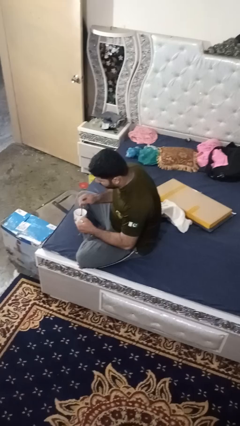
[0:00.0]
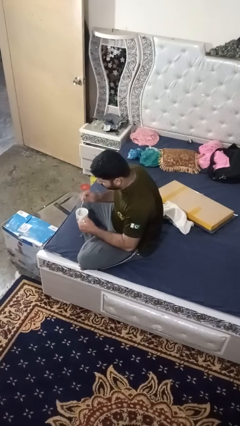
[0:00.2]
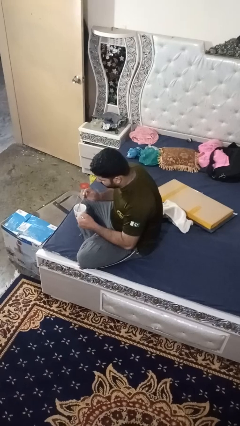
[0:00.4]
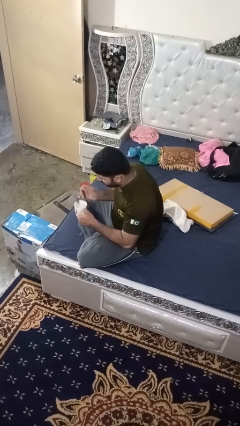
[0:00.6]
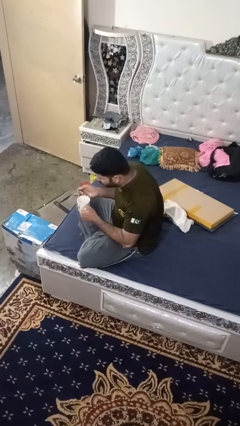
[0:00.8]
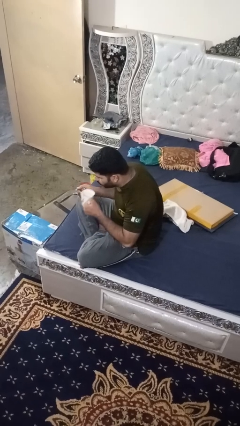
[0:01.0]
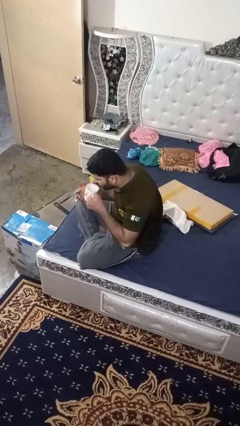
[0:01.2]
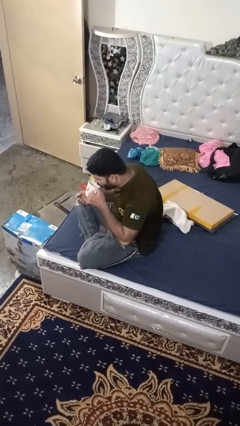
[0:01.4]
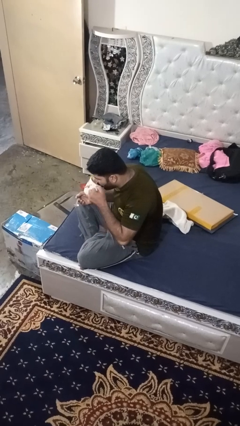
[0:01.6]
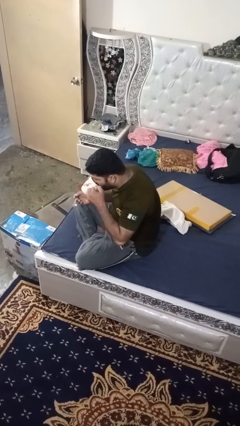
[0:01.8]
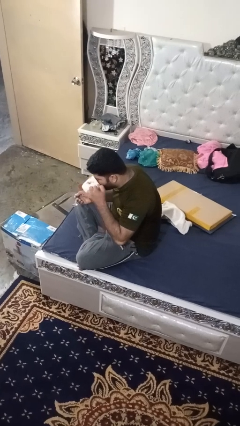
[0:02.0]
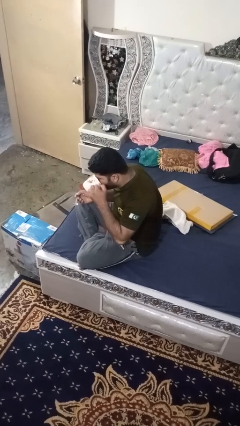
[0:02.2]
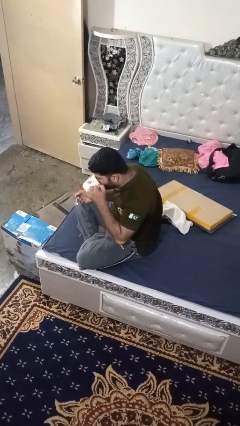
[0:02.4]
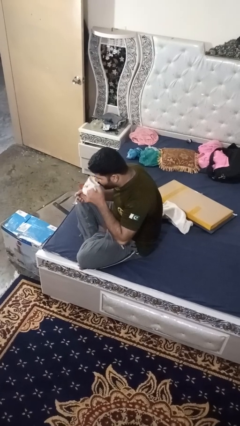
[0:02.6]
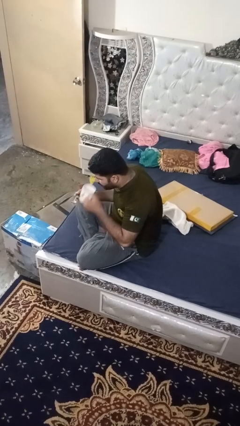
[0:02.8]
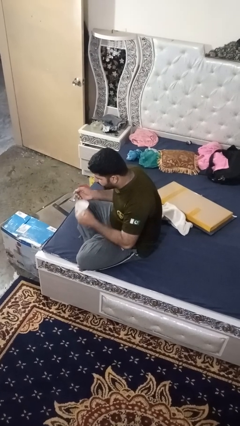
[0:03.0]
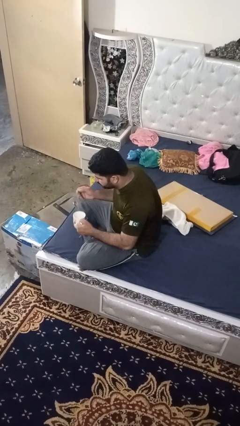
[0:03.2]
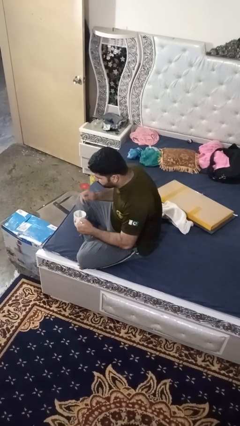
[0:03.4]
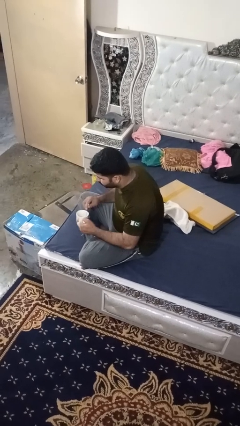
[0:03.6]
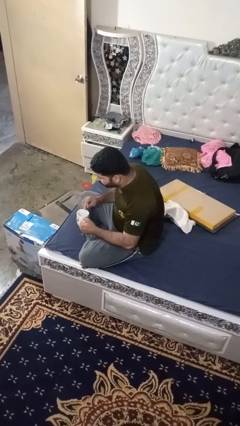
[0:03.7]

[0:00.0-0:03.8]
person drinks from mug

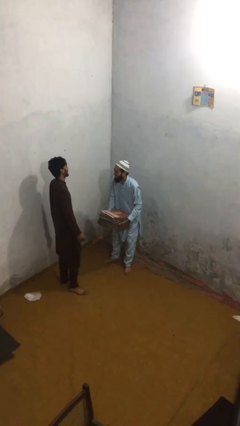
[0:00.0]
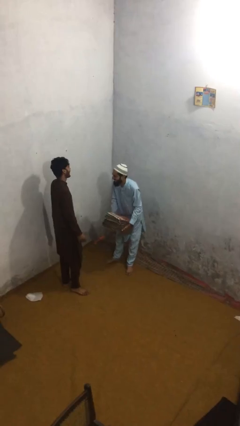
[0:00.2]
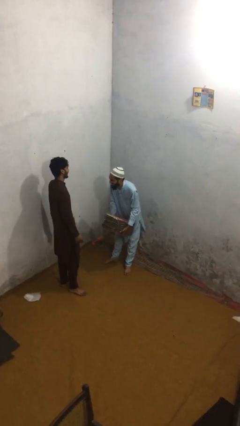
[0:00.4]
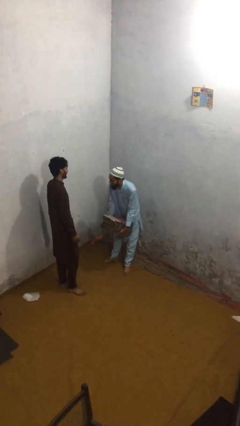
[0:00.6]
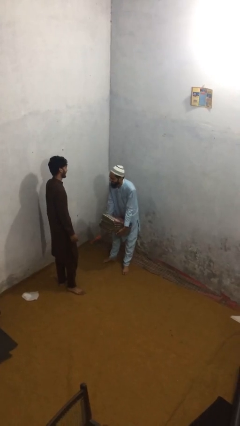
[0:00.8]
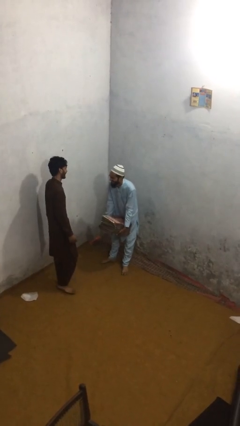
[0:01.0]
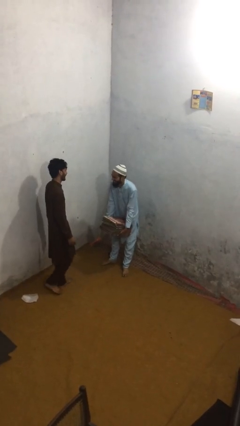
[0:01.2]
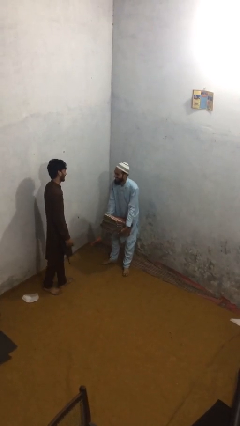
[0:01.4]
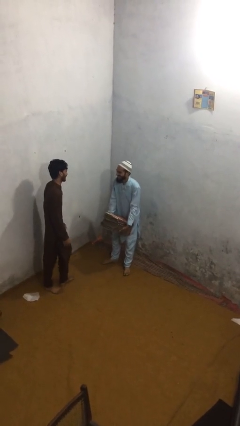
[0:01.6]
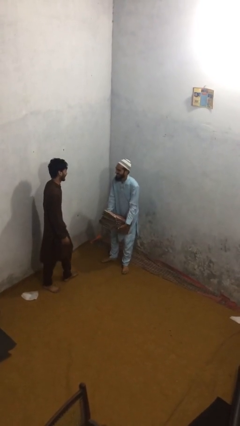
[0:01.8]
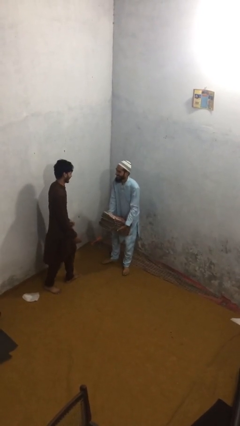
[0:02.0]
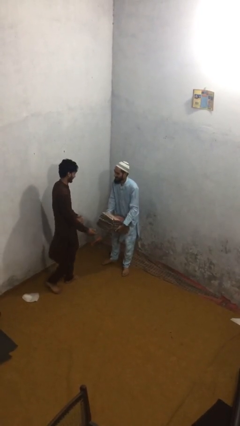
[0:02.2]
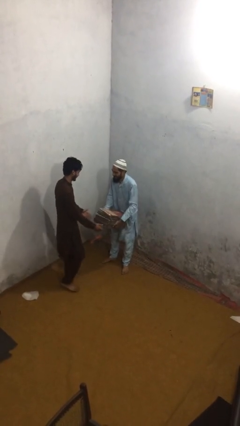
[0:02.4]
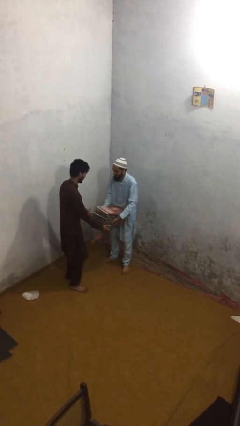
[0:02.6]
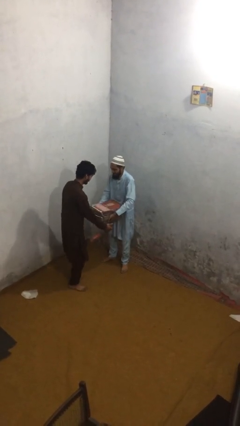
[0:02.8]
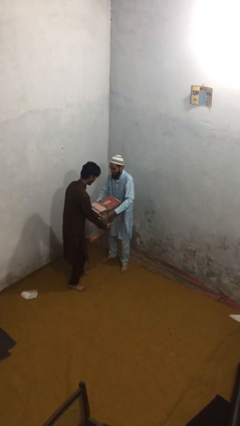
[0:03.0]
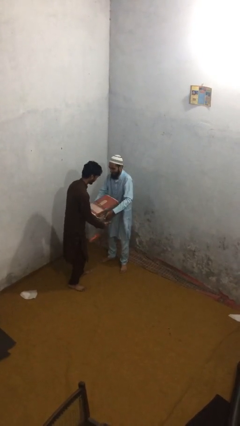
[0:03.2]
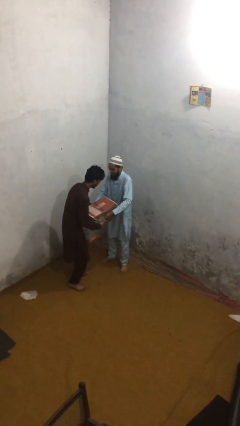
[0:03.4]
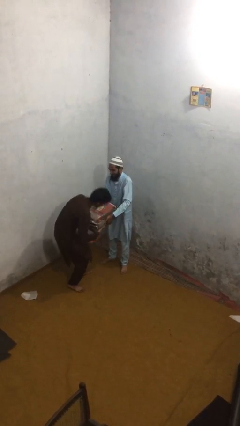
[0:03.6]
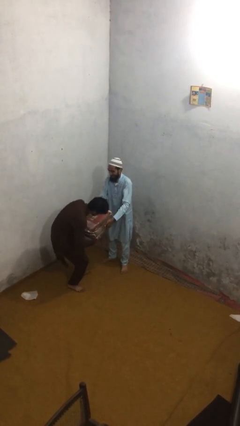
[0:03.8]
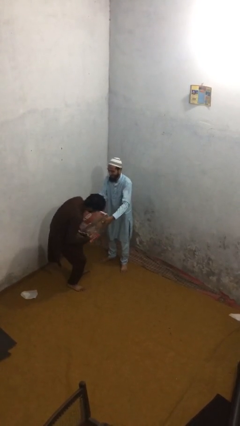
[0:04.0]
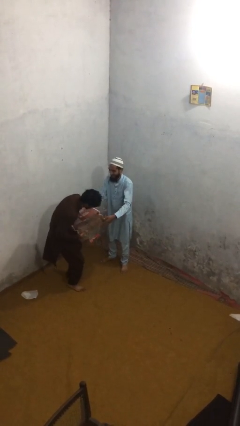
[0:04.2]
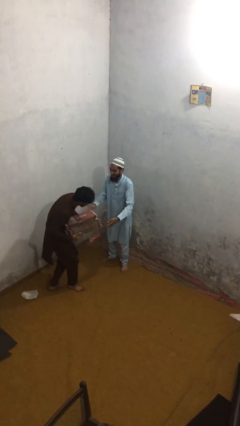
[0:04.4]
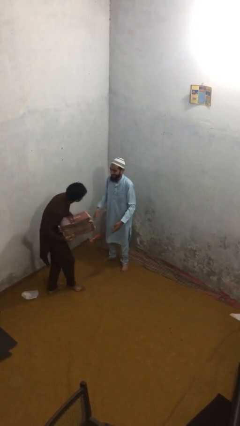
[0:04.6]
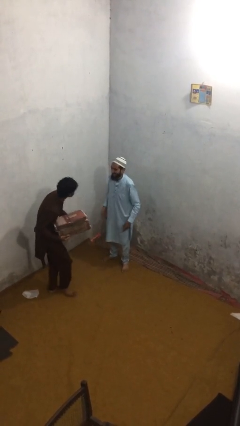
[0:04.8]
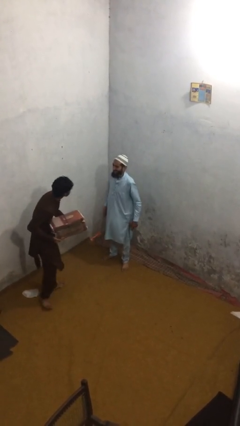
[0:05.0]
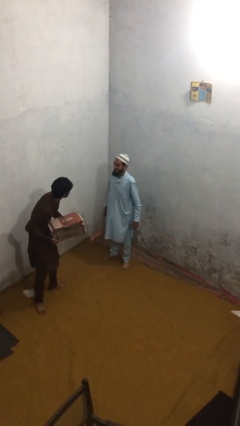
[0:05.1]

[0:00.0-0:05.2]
person transfers object to person

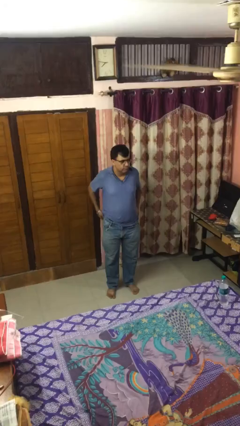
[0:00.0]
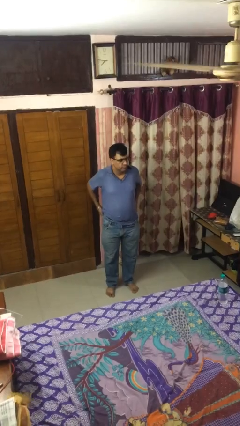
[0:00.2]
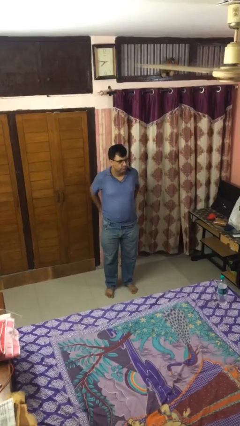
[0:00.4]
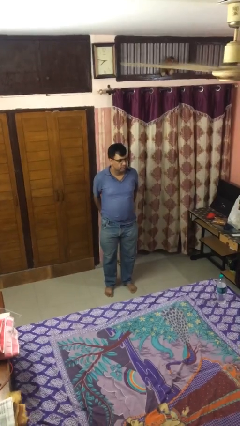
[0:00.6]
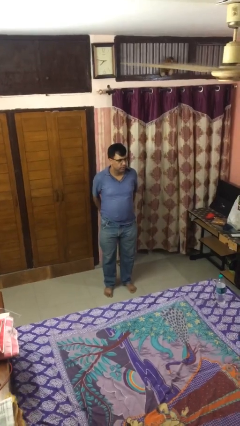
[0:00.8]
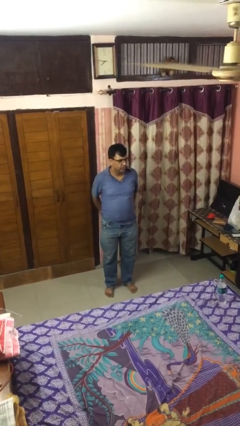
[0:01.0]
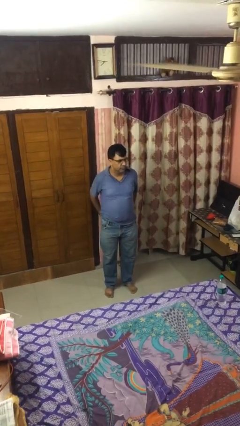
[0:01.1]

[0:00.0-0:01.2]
person puts hands in back pockets

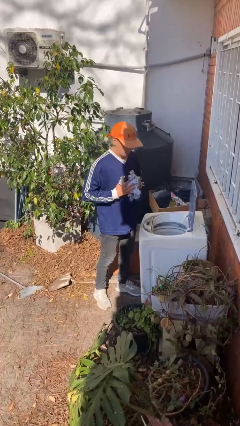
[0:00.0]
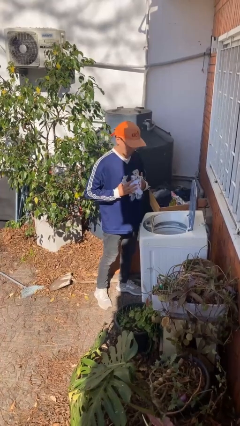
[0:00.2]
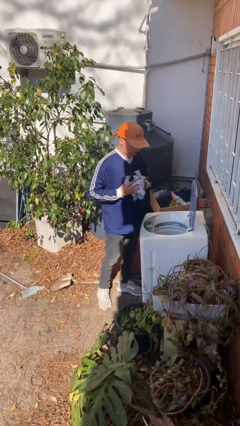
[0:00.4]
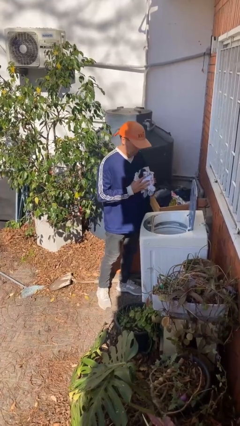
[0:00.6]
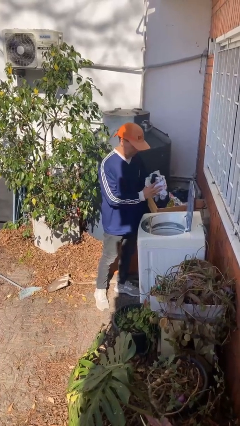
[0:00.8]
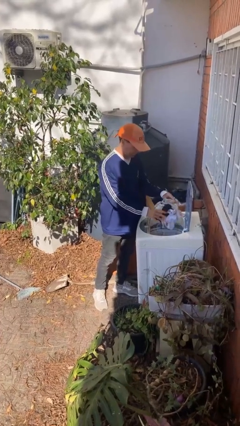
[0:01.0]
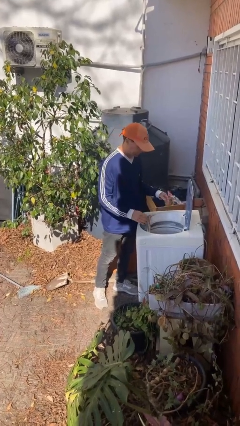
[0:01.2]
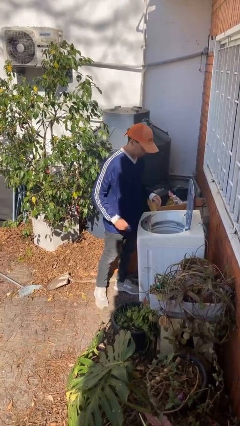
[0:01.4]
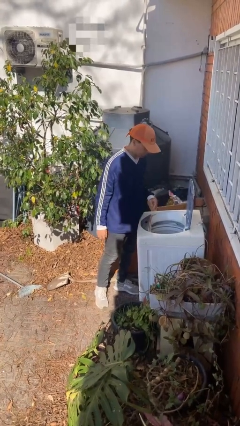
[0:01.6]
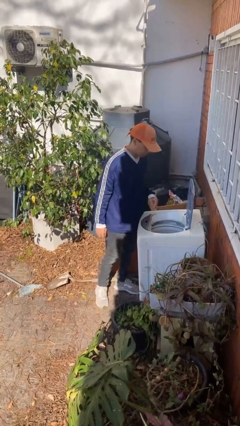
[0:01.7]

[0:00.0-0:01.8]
person loads clotheswasher

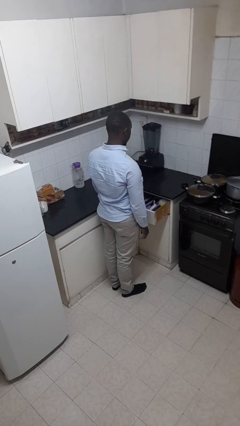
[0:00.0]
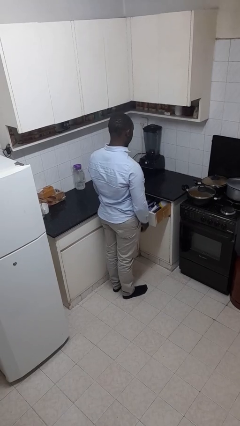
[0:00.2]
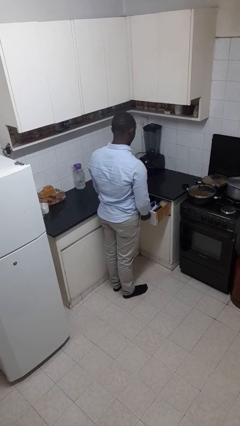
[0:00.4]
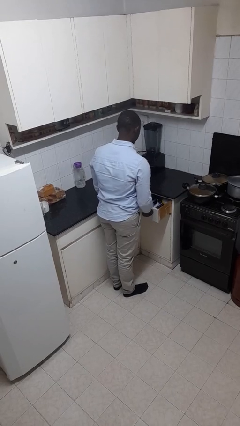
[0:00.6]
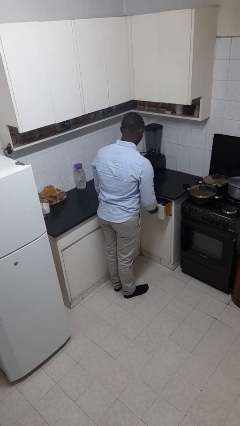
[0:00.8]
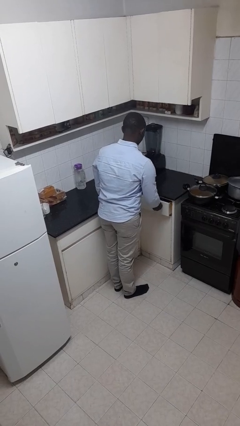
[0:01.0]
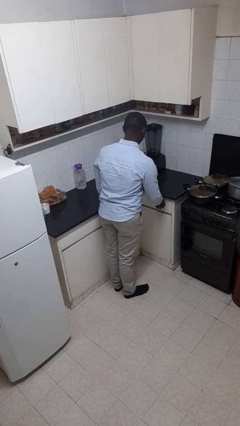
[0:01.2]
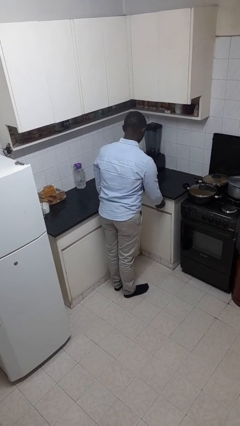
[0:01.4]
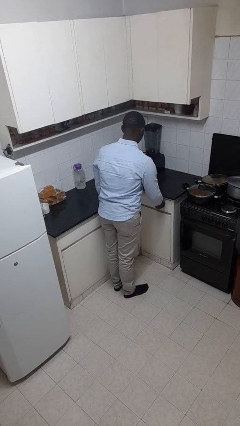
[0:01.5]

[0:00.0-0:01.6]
person closes kitchen drawer

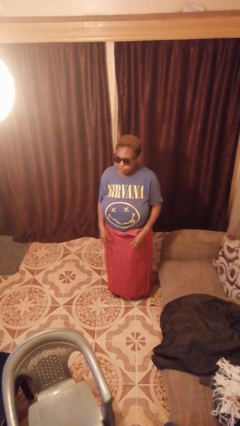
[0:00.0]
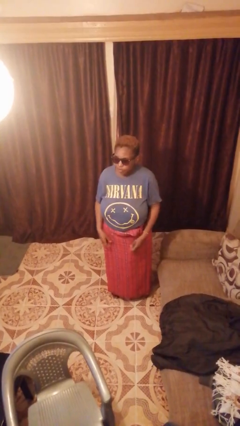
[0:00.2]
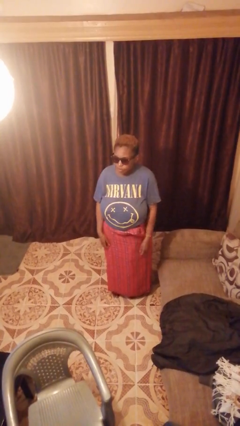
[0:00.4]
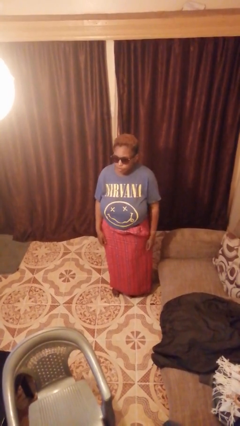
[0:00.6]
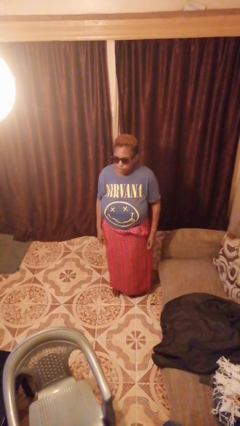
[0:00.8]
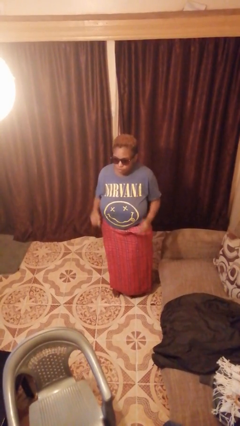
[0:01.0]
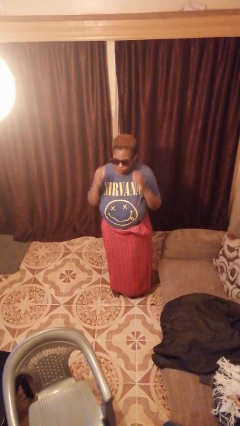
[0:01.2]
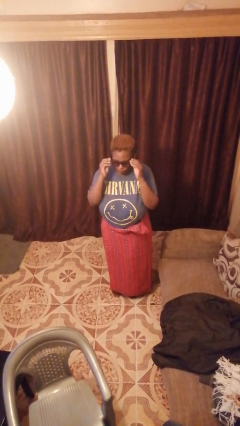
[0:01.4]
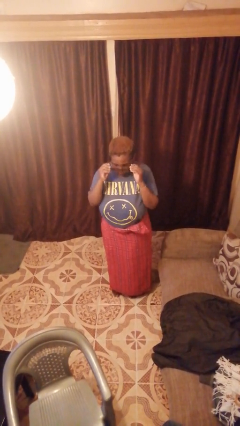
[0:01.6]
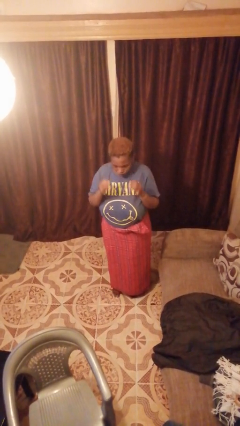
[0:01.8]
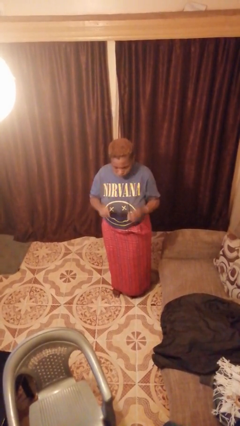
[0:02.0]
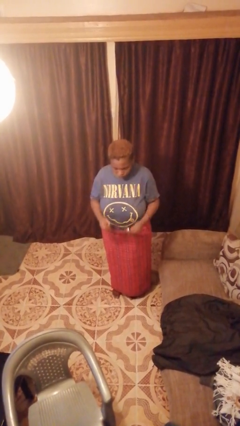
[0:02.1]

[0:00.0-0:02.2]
person takes off sunglasses

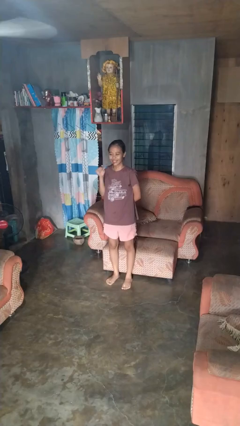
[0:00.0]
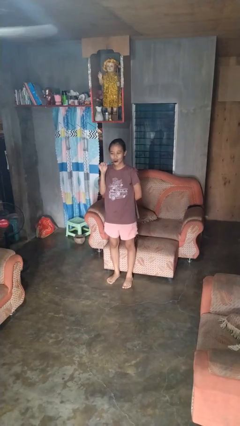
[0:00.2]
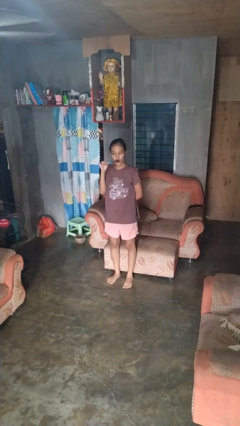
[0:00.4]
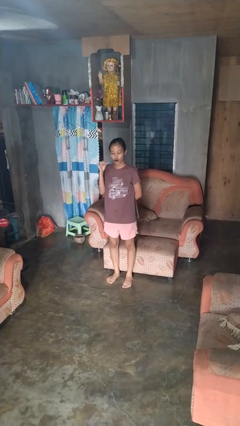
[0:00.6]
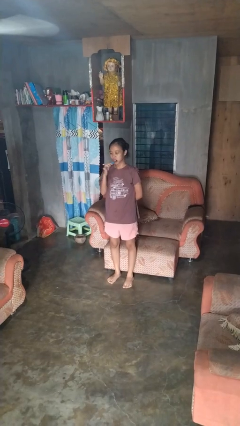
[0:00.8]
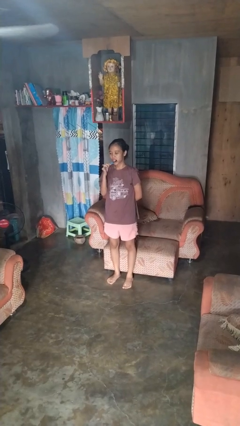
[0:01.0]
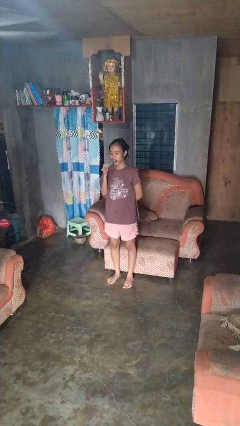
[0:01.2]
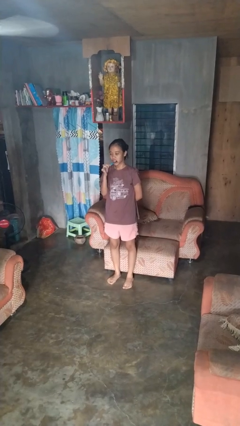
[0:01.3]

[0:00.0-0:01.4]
person brushes teeth

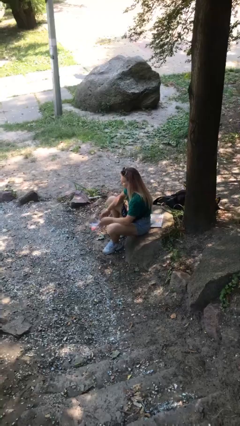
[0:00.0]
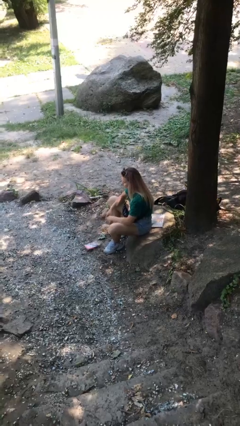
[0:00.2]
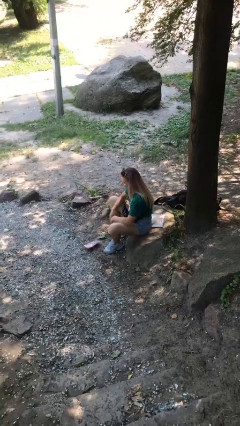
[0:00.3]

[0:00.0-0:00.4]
person drops object
